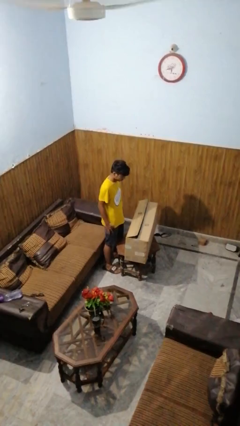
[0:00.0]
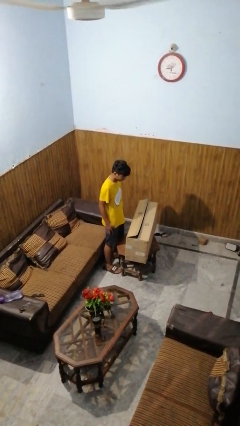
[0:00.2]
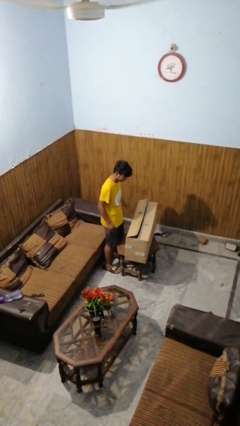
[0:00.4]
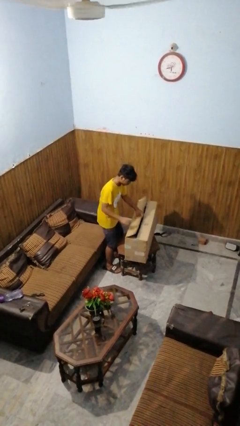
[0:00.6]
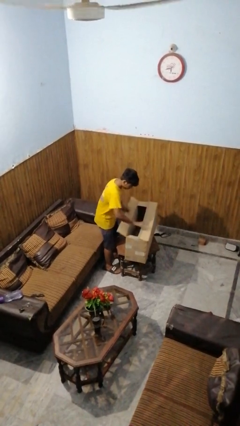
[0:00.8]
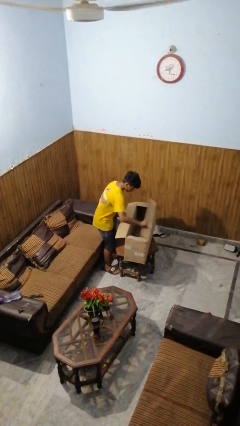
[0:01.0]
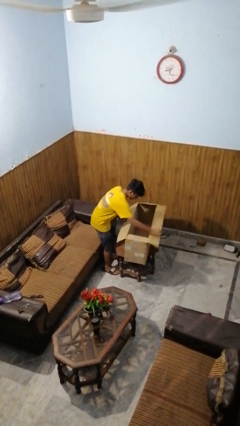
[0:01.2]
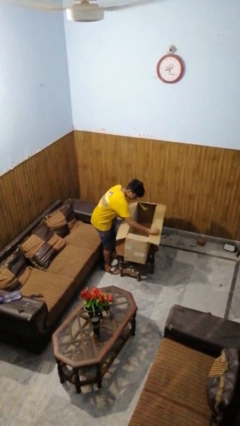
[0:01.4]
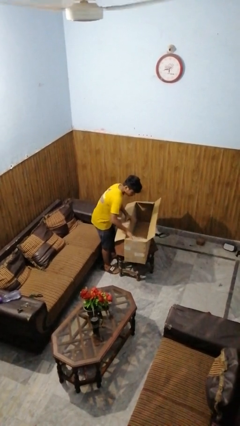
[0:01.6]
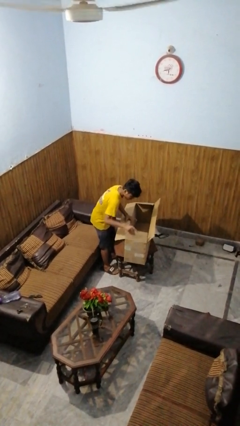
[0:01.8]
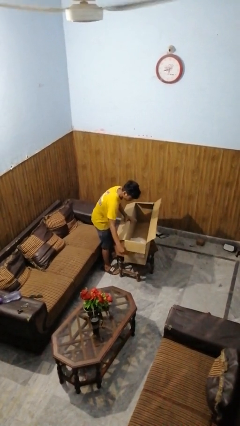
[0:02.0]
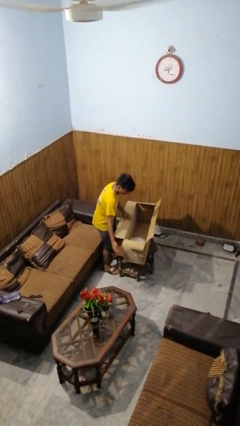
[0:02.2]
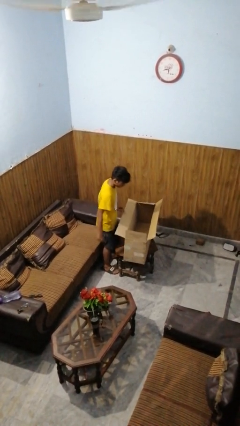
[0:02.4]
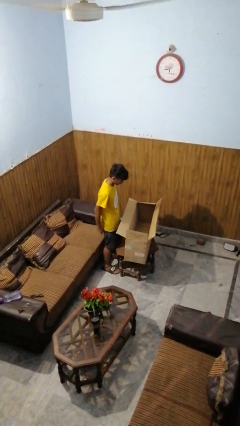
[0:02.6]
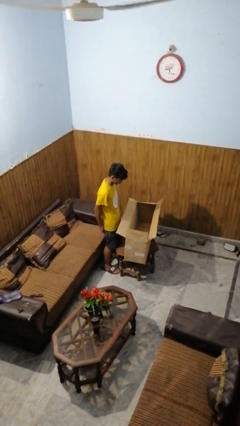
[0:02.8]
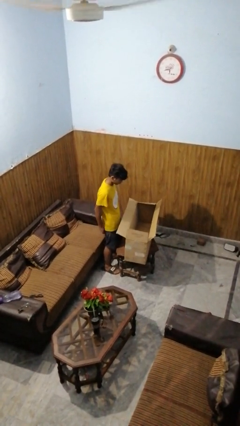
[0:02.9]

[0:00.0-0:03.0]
person opens box

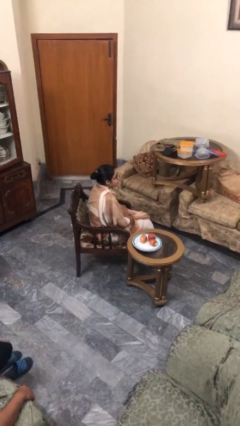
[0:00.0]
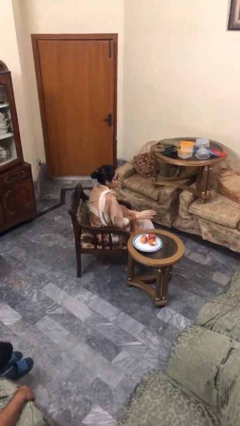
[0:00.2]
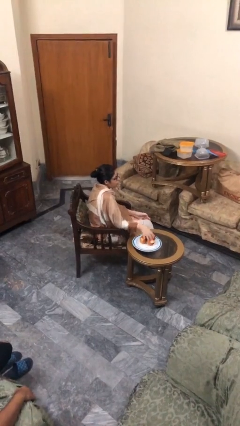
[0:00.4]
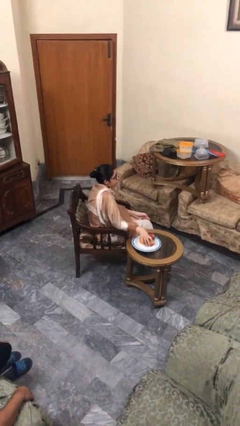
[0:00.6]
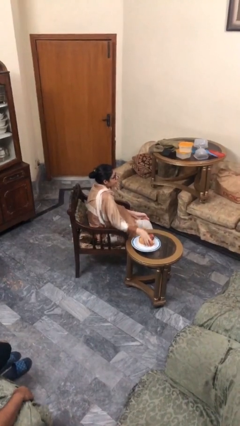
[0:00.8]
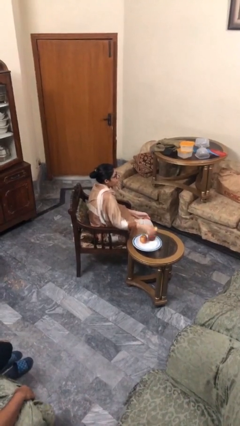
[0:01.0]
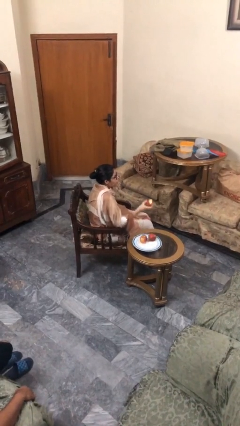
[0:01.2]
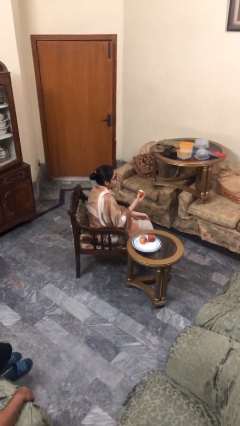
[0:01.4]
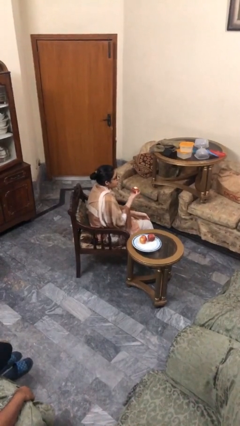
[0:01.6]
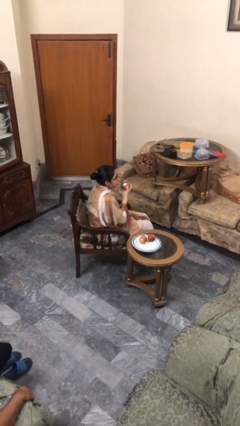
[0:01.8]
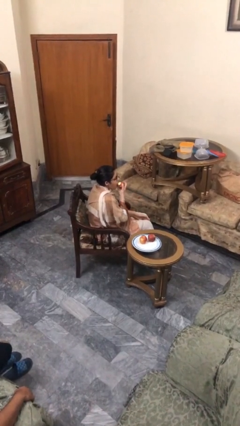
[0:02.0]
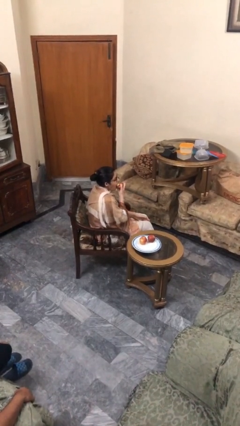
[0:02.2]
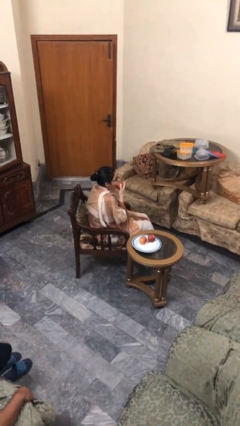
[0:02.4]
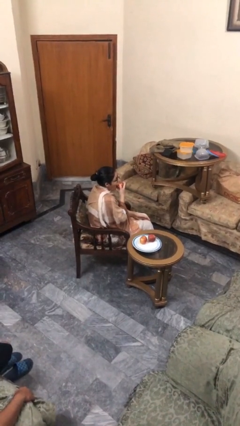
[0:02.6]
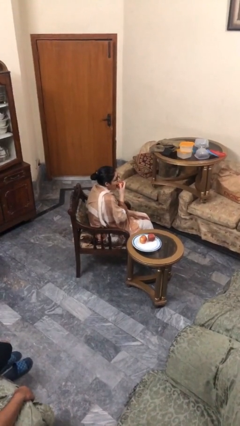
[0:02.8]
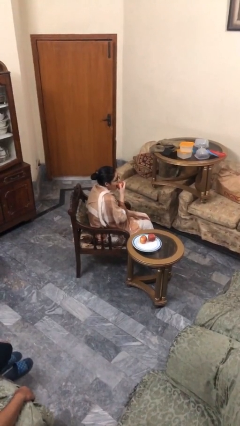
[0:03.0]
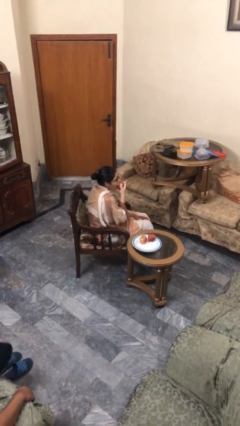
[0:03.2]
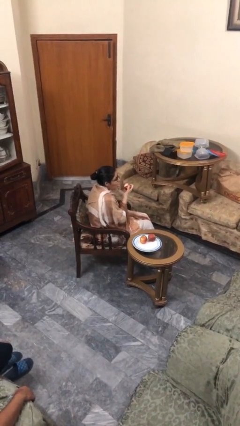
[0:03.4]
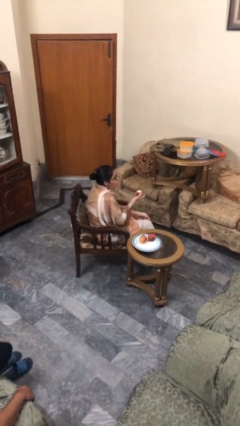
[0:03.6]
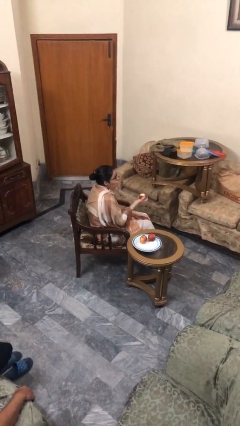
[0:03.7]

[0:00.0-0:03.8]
person eats apple

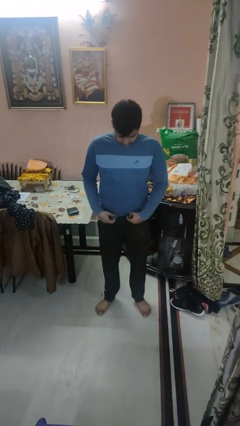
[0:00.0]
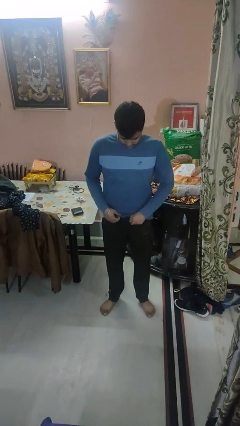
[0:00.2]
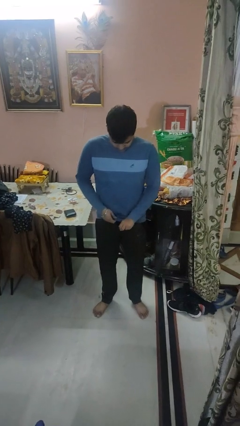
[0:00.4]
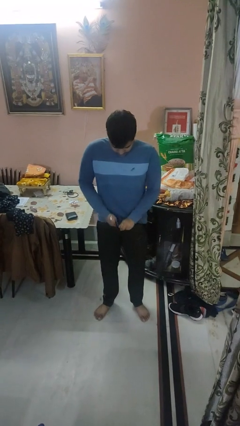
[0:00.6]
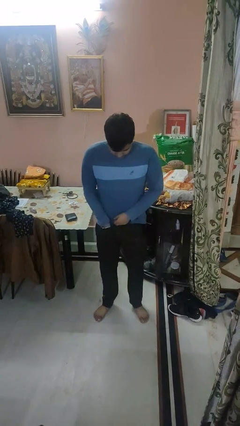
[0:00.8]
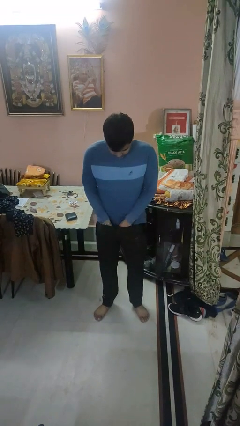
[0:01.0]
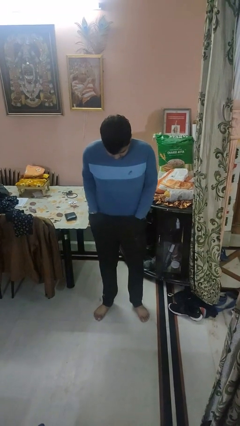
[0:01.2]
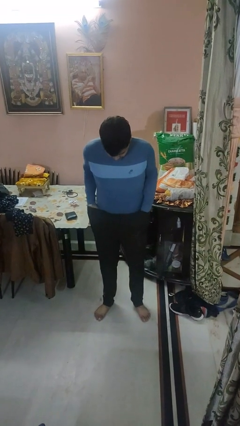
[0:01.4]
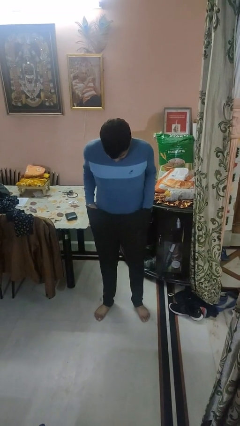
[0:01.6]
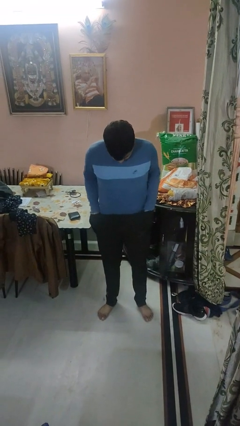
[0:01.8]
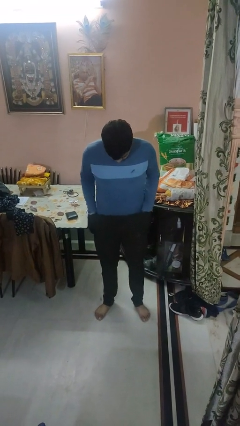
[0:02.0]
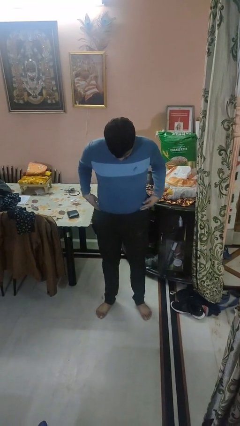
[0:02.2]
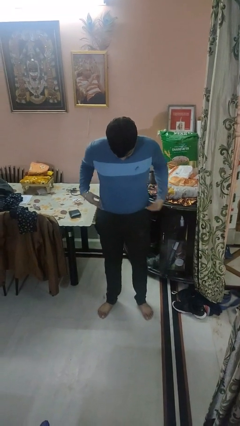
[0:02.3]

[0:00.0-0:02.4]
person tucks in shirt

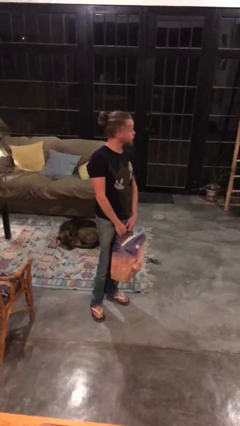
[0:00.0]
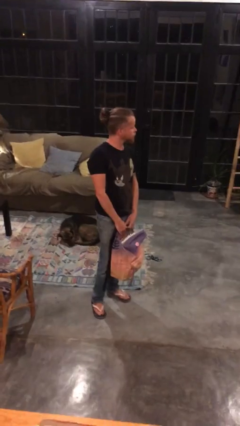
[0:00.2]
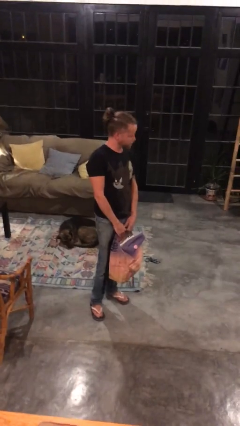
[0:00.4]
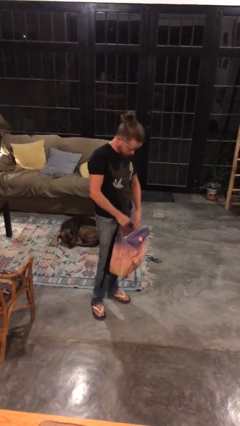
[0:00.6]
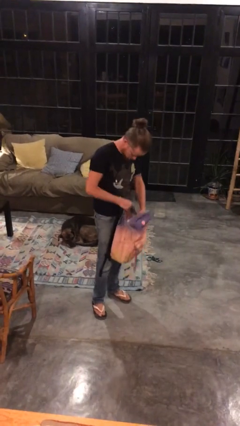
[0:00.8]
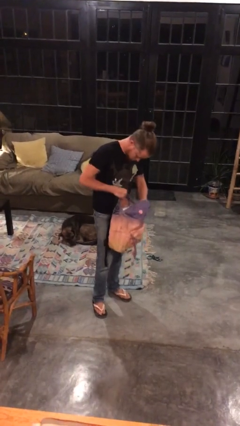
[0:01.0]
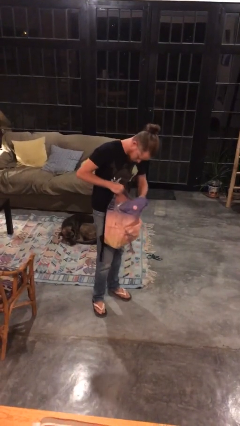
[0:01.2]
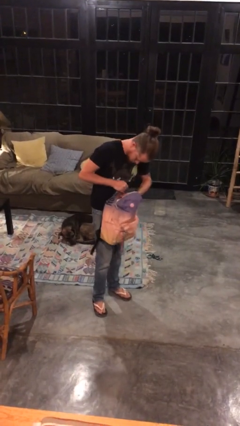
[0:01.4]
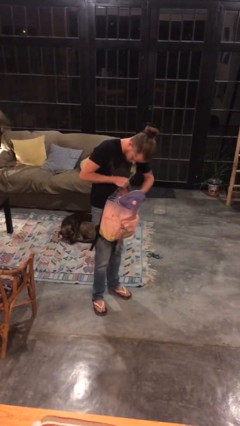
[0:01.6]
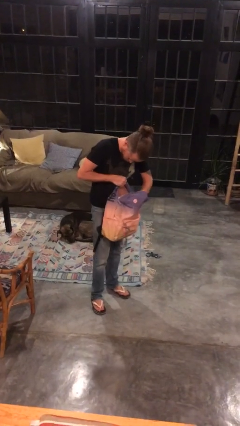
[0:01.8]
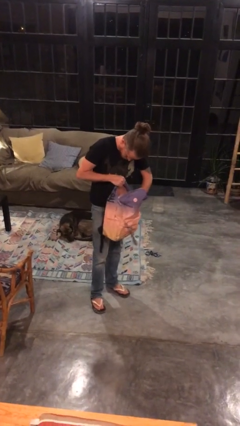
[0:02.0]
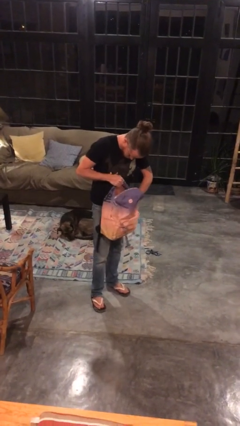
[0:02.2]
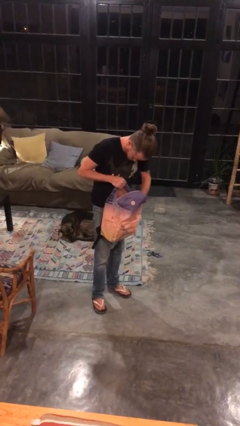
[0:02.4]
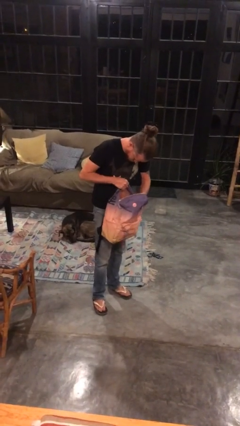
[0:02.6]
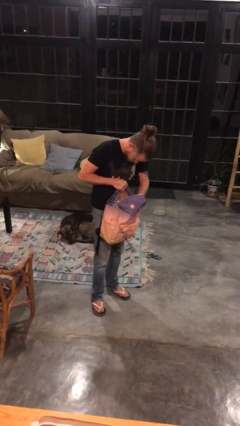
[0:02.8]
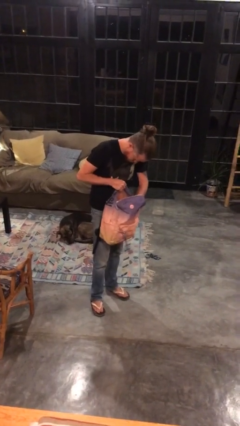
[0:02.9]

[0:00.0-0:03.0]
person searches in backpack

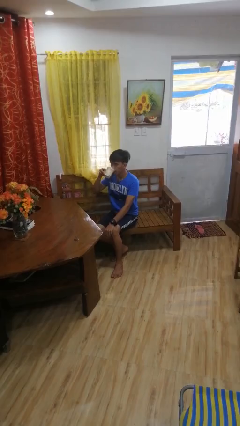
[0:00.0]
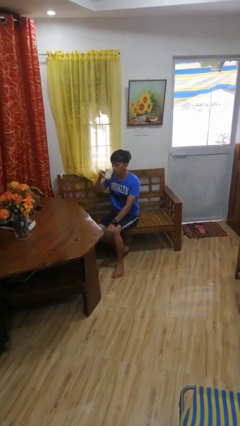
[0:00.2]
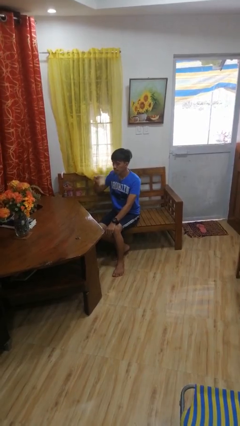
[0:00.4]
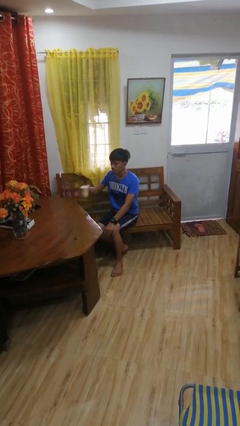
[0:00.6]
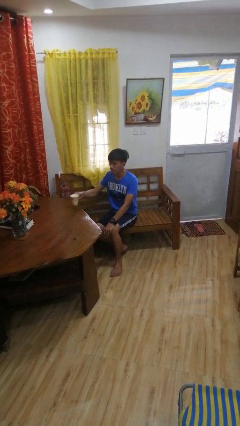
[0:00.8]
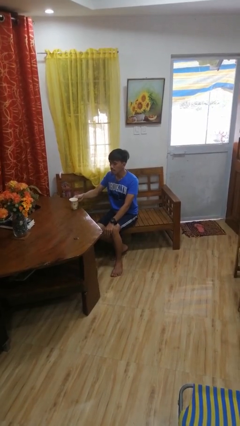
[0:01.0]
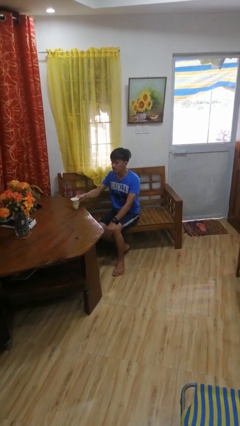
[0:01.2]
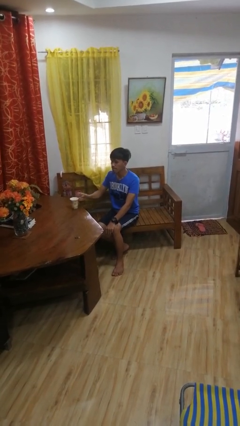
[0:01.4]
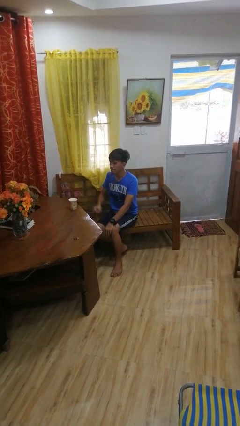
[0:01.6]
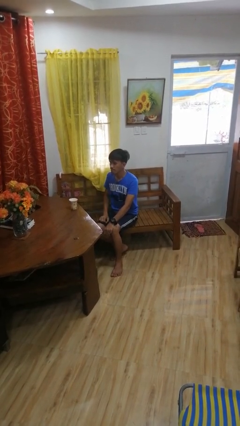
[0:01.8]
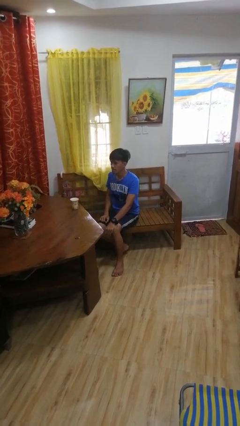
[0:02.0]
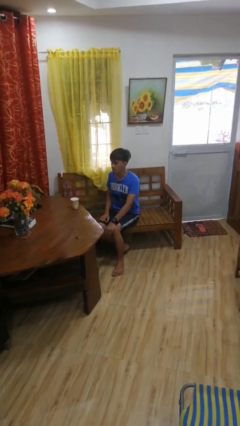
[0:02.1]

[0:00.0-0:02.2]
person puts down object on table

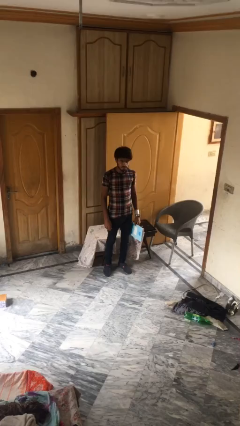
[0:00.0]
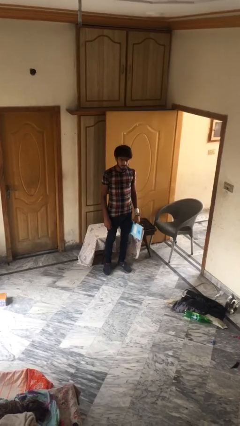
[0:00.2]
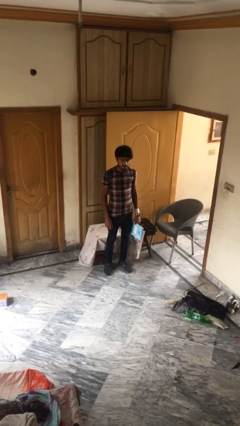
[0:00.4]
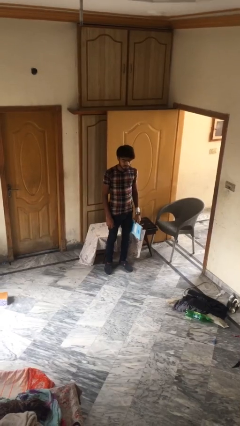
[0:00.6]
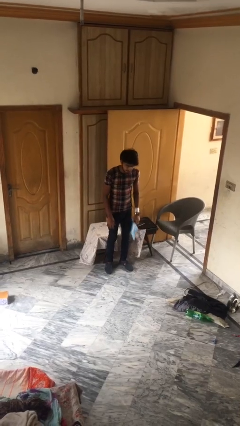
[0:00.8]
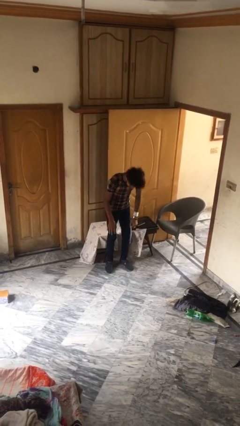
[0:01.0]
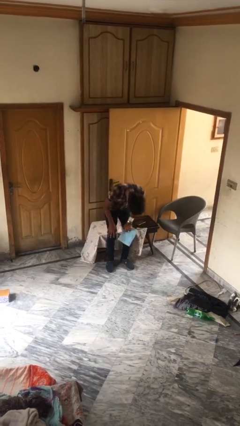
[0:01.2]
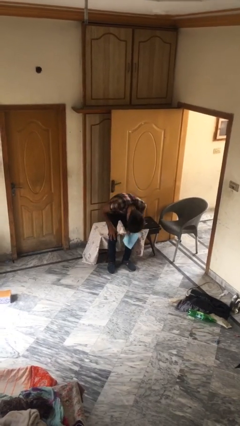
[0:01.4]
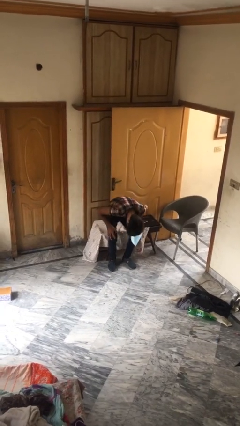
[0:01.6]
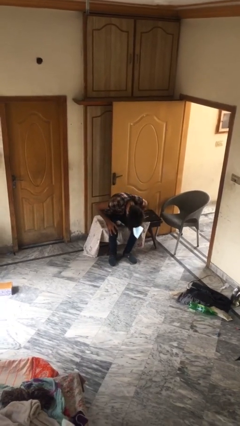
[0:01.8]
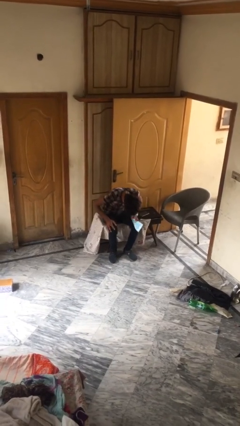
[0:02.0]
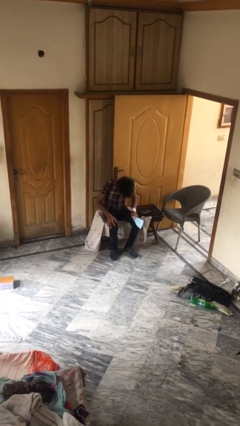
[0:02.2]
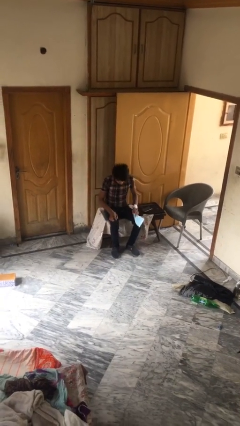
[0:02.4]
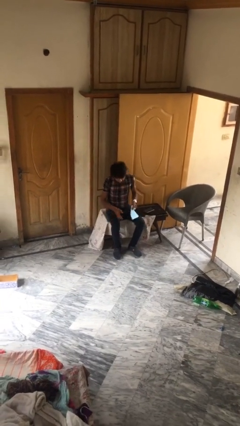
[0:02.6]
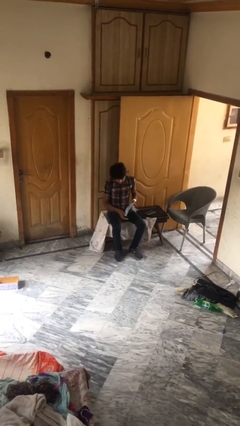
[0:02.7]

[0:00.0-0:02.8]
person sits down

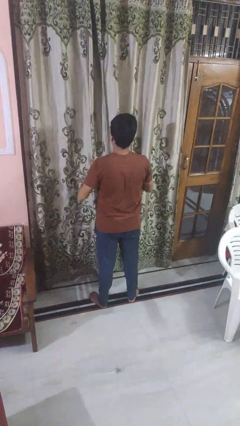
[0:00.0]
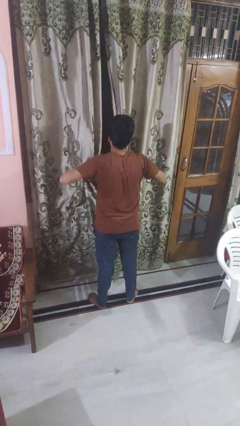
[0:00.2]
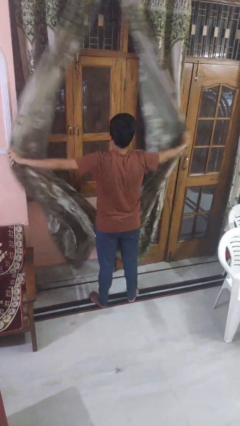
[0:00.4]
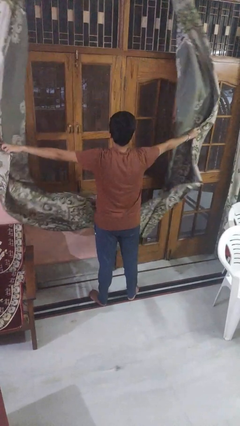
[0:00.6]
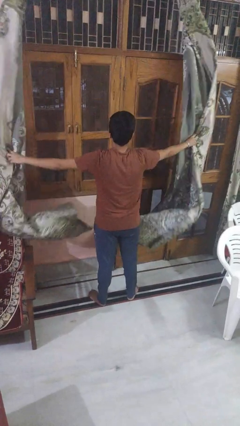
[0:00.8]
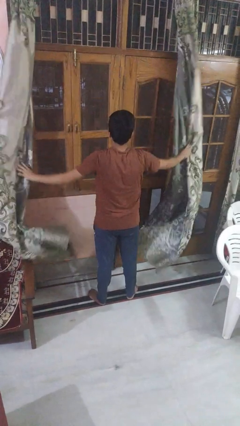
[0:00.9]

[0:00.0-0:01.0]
person opens curtains
